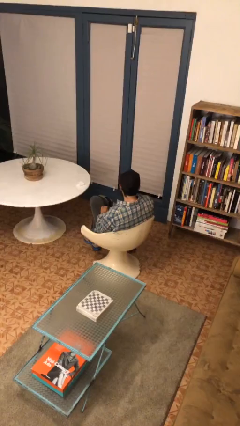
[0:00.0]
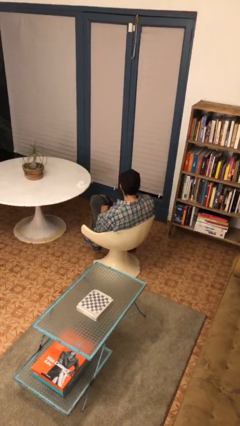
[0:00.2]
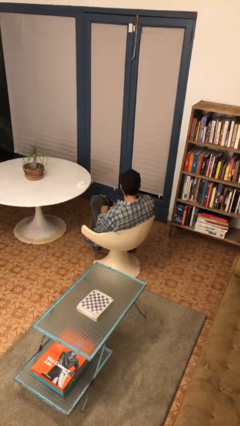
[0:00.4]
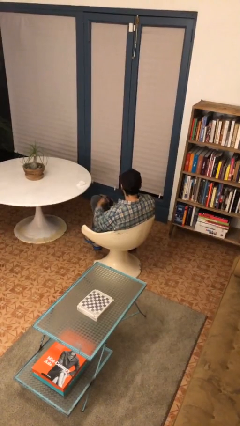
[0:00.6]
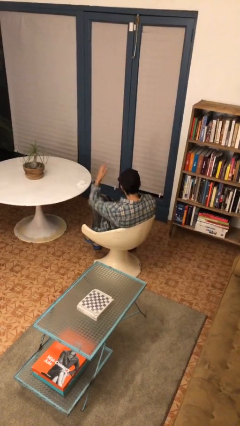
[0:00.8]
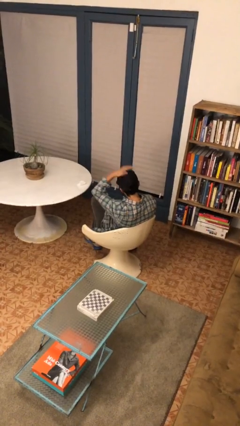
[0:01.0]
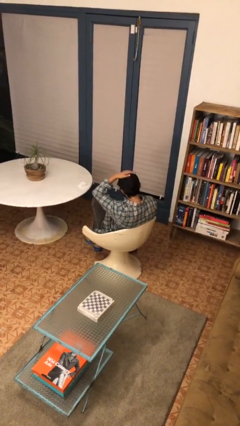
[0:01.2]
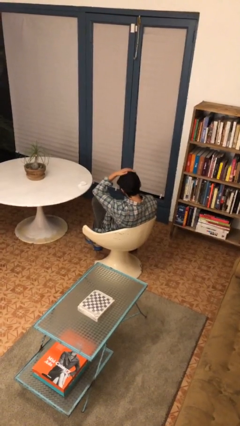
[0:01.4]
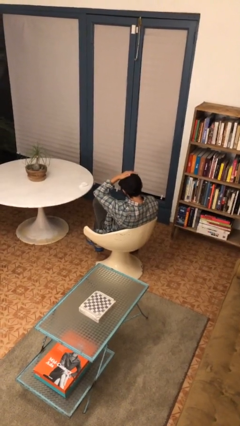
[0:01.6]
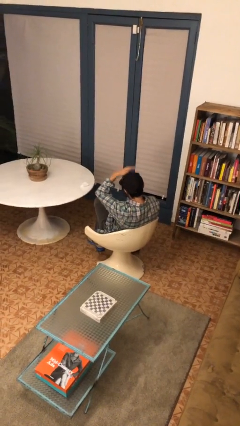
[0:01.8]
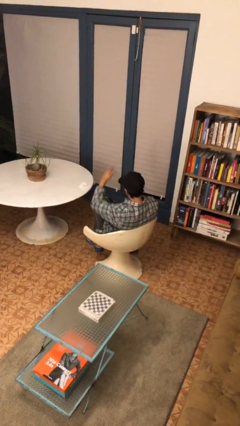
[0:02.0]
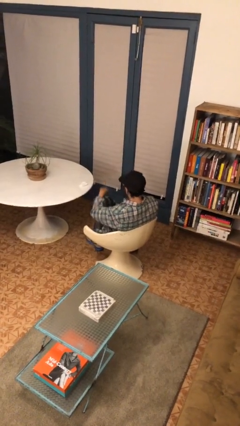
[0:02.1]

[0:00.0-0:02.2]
person pats head

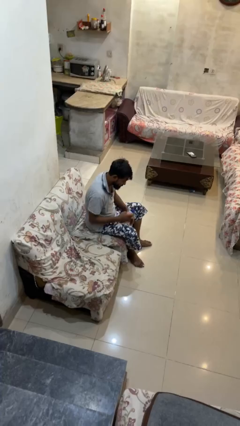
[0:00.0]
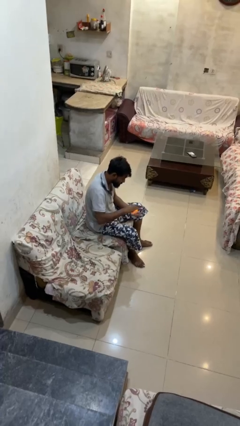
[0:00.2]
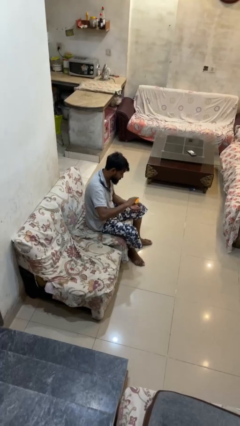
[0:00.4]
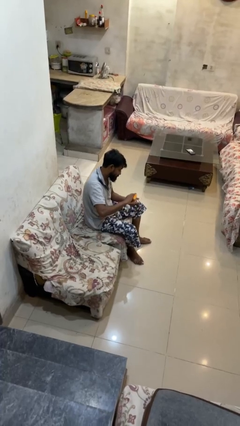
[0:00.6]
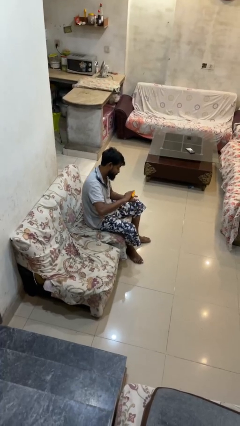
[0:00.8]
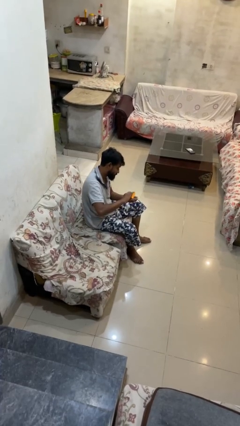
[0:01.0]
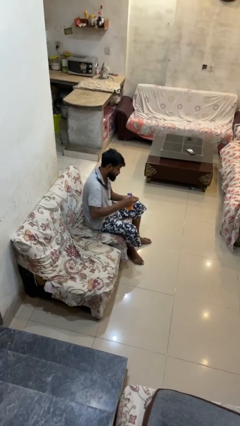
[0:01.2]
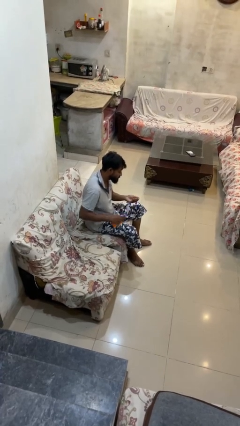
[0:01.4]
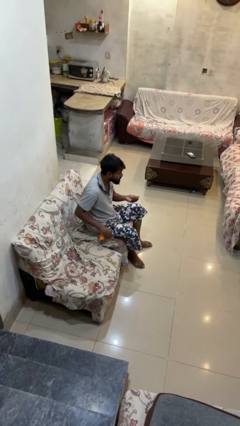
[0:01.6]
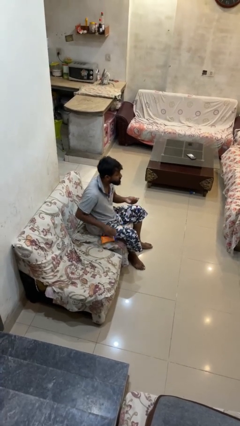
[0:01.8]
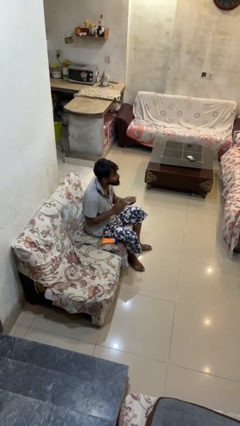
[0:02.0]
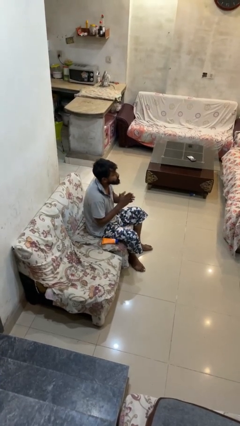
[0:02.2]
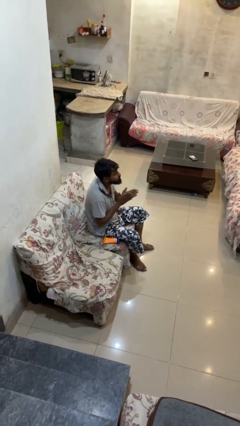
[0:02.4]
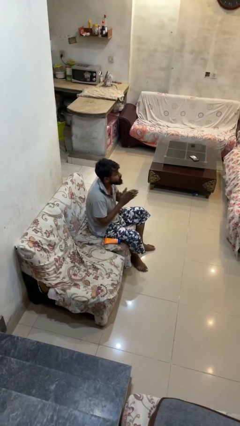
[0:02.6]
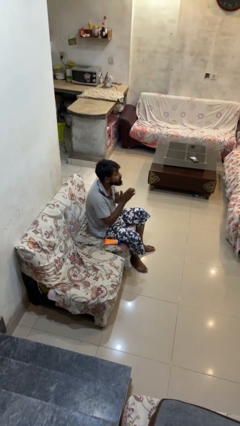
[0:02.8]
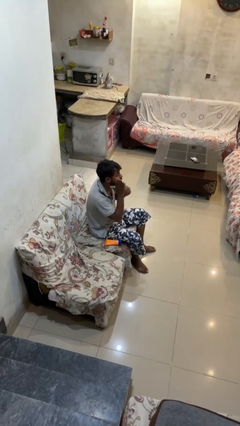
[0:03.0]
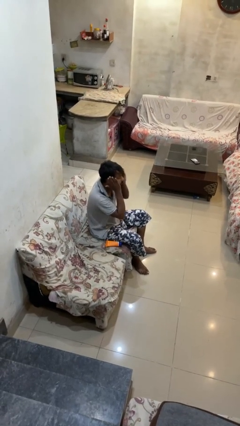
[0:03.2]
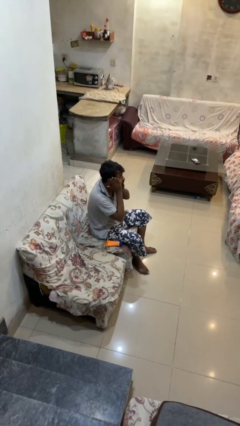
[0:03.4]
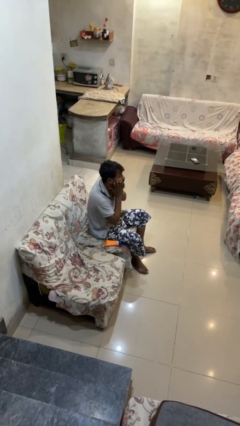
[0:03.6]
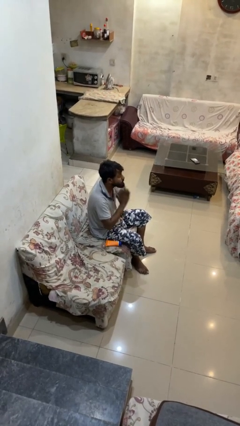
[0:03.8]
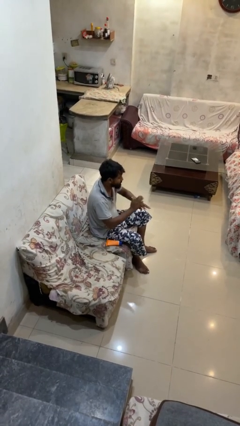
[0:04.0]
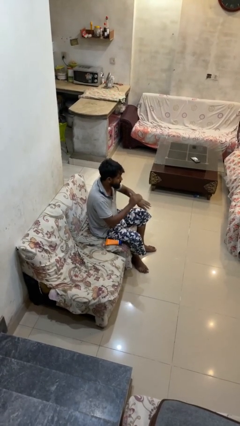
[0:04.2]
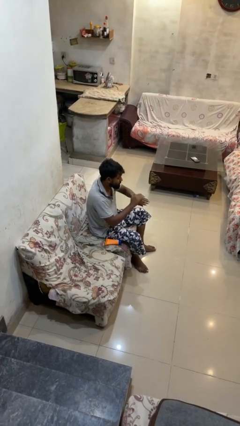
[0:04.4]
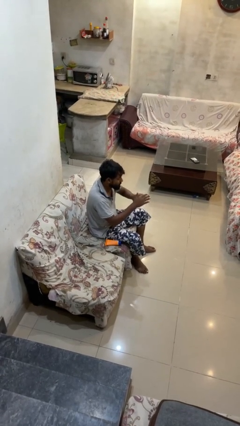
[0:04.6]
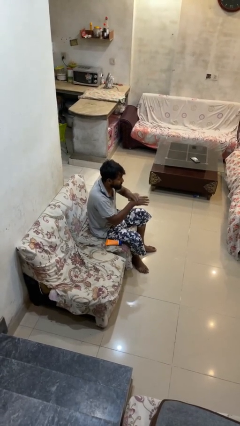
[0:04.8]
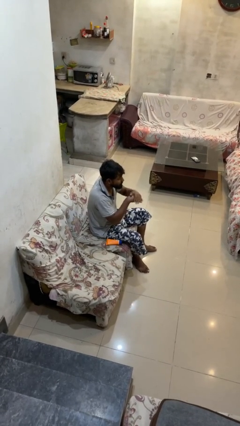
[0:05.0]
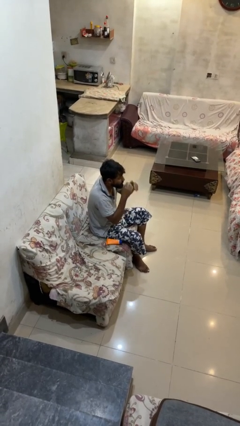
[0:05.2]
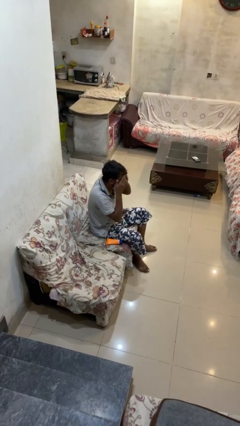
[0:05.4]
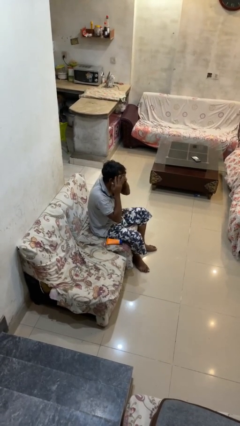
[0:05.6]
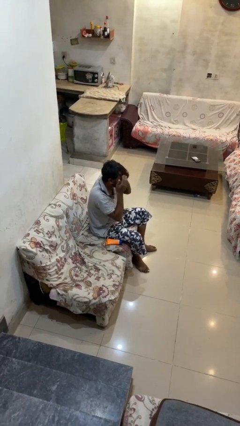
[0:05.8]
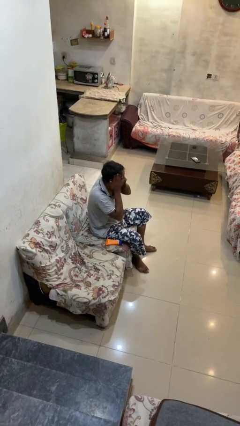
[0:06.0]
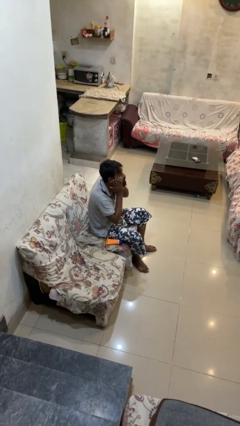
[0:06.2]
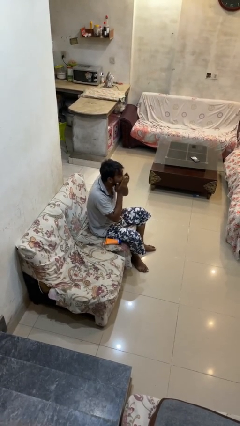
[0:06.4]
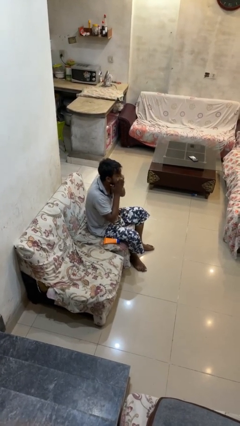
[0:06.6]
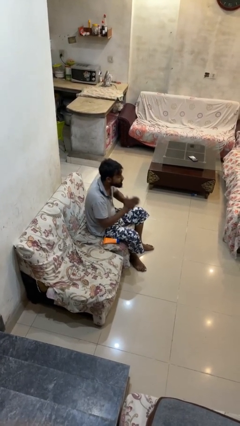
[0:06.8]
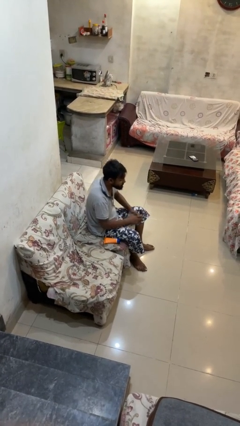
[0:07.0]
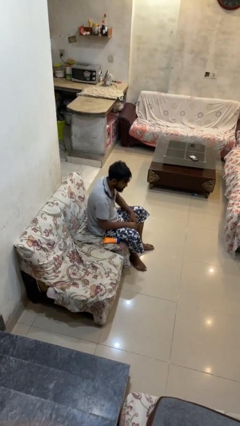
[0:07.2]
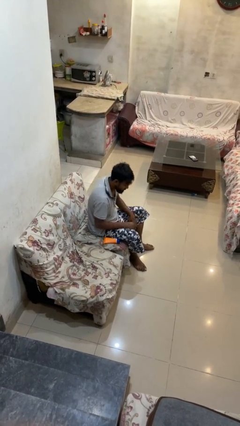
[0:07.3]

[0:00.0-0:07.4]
person applies facial moisturizer

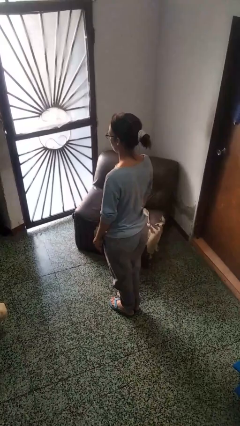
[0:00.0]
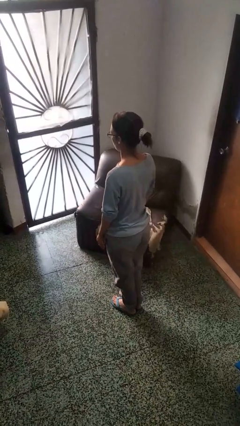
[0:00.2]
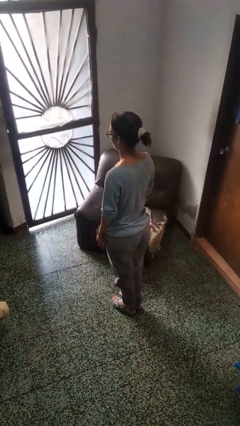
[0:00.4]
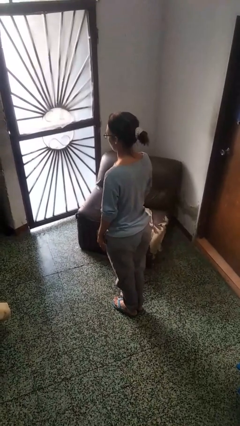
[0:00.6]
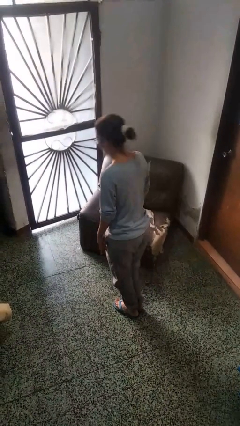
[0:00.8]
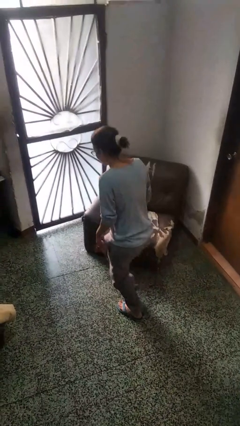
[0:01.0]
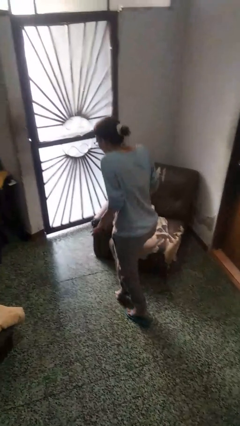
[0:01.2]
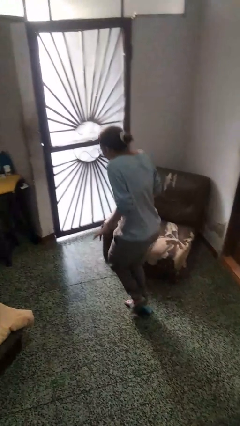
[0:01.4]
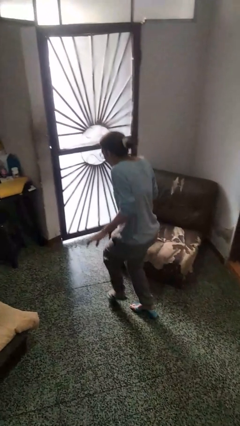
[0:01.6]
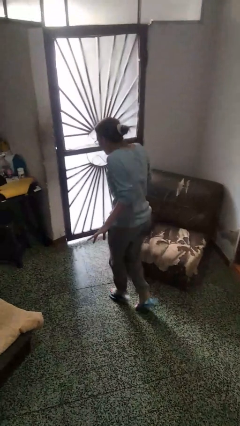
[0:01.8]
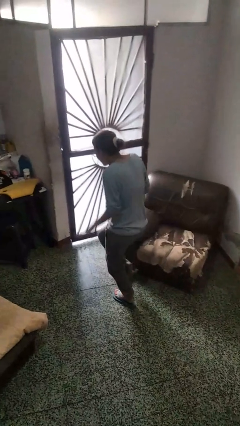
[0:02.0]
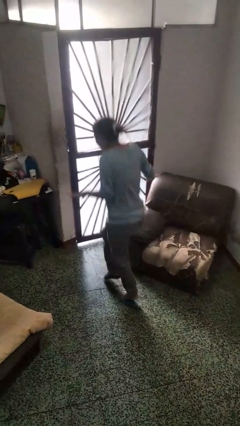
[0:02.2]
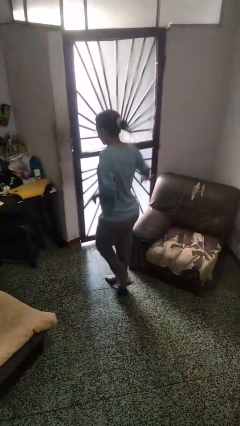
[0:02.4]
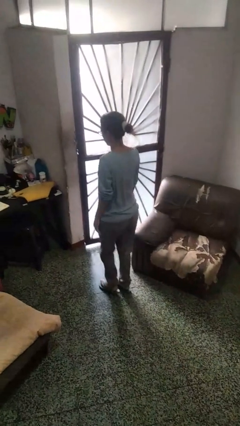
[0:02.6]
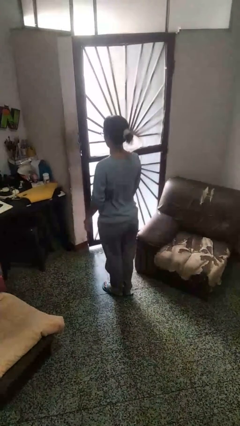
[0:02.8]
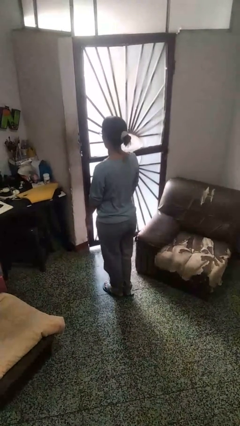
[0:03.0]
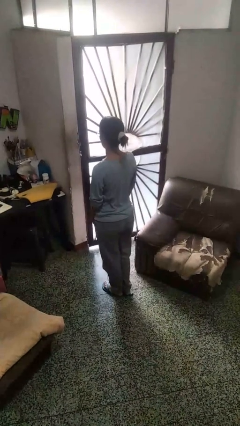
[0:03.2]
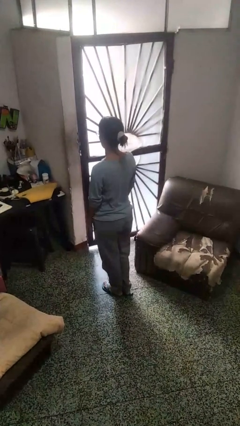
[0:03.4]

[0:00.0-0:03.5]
person walks tiptoe

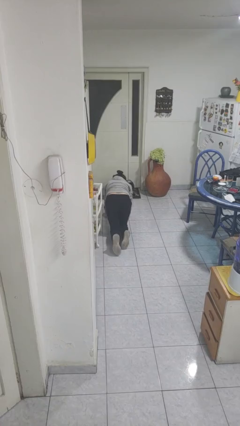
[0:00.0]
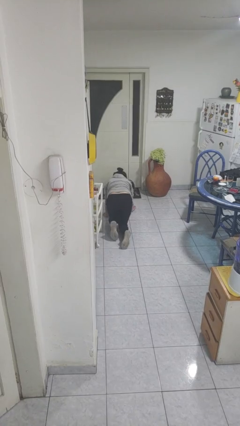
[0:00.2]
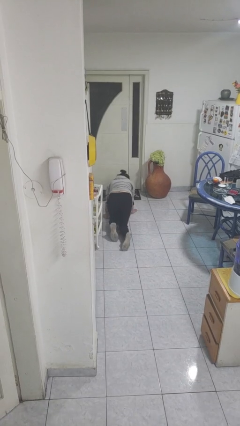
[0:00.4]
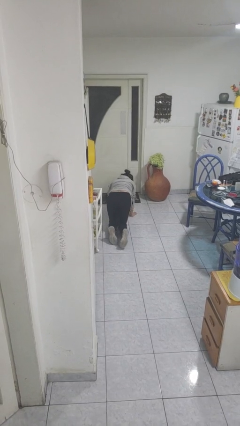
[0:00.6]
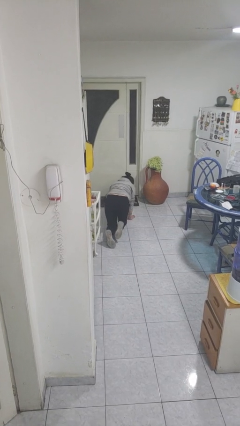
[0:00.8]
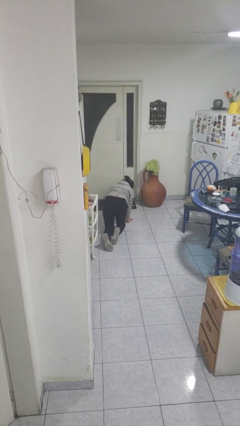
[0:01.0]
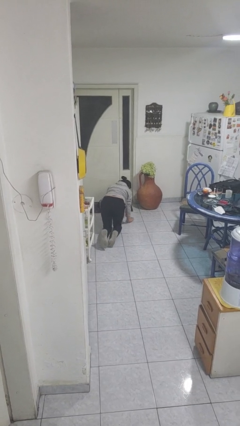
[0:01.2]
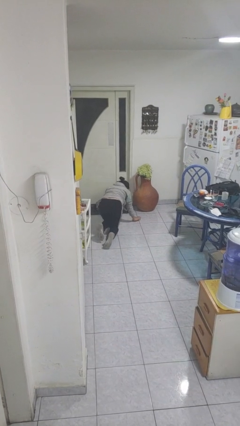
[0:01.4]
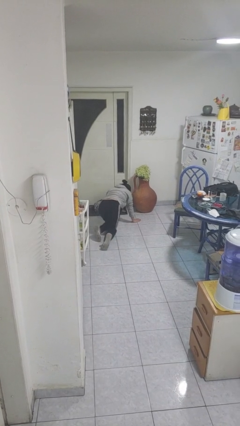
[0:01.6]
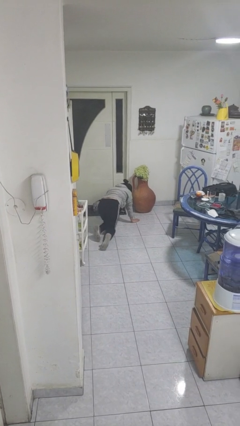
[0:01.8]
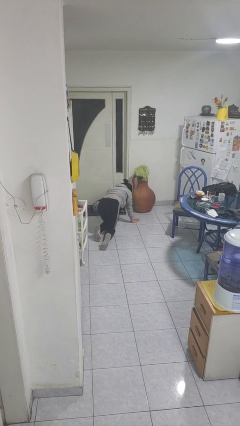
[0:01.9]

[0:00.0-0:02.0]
person crawls

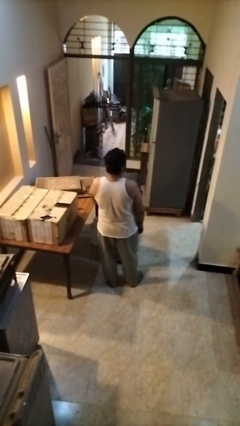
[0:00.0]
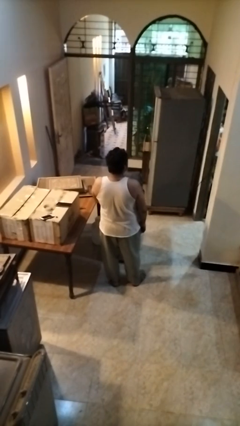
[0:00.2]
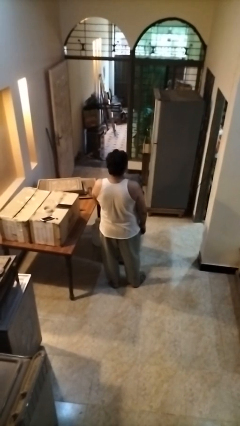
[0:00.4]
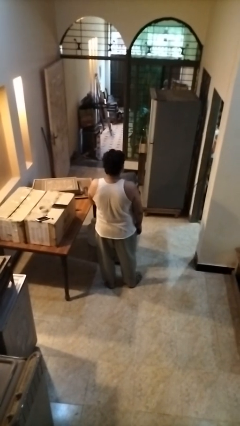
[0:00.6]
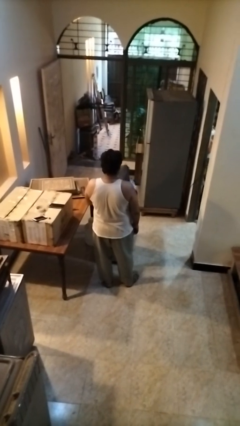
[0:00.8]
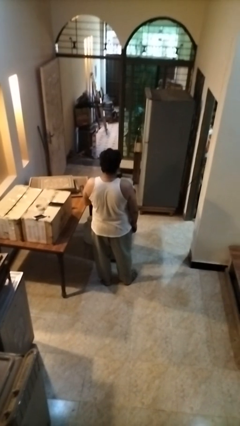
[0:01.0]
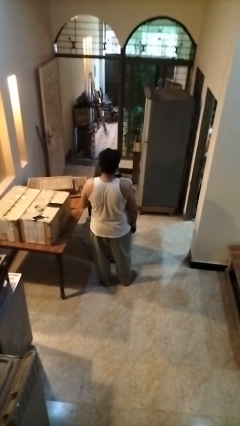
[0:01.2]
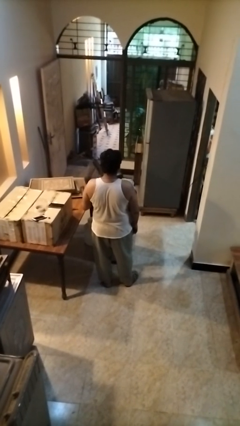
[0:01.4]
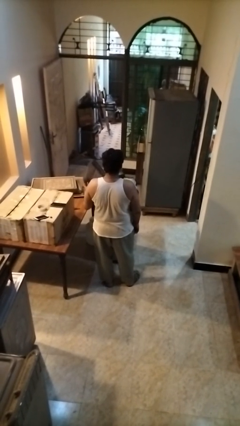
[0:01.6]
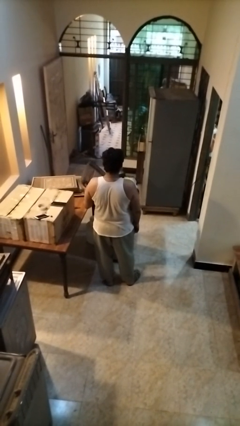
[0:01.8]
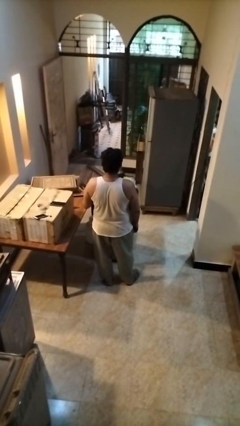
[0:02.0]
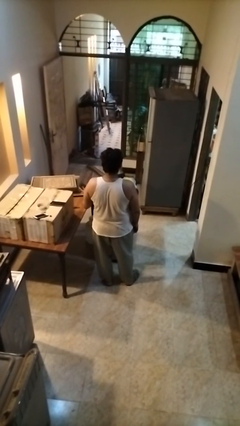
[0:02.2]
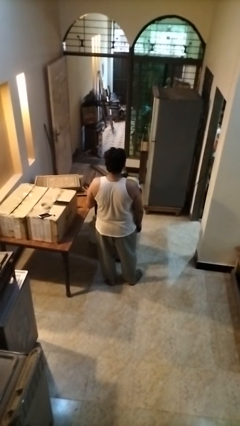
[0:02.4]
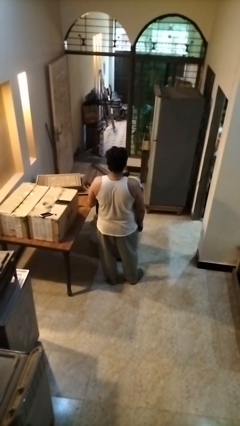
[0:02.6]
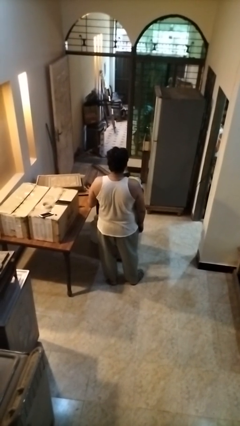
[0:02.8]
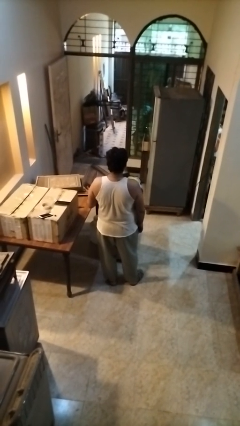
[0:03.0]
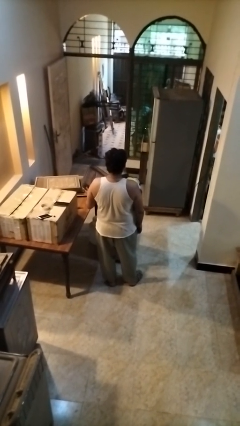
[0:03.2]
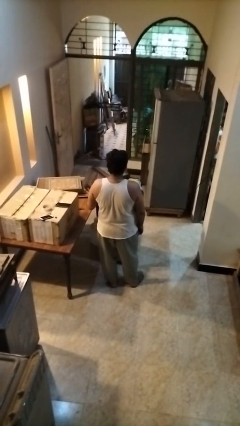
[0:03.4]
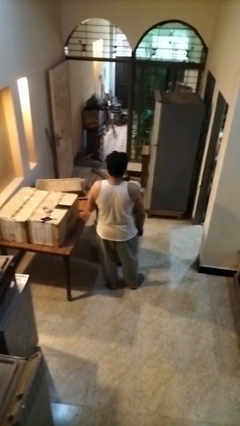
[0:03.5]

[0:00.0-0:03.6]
person opens suitcase
